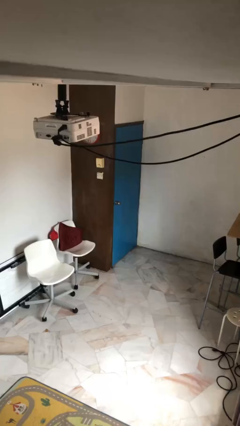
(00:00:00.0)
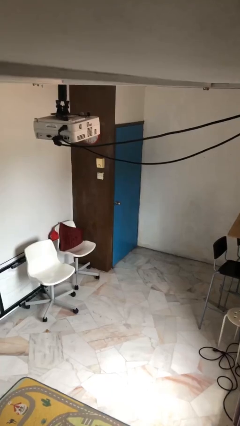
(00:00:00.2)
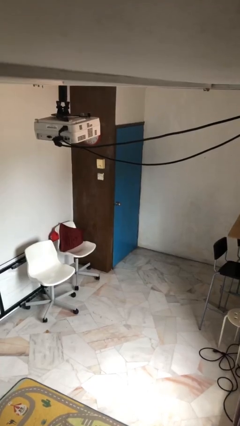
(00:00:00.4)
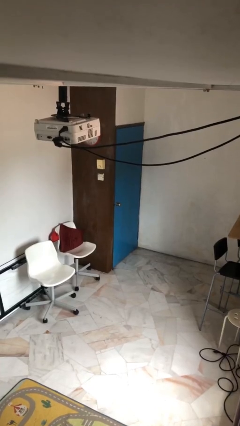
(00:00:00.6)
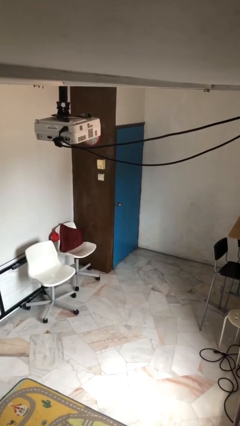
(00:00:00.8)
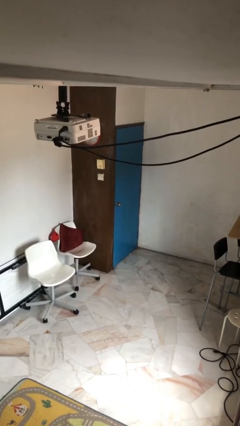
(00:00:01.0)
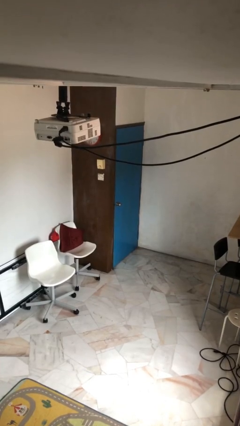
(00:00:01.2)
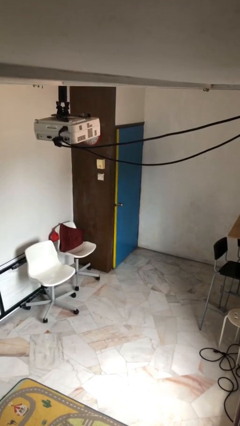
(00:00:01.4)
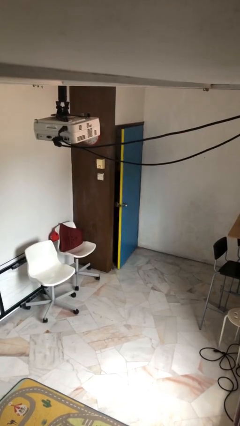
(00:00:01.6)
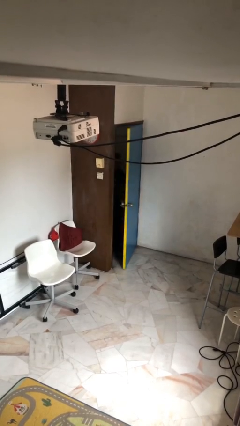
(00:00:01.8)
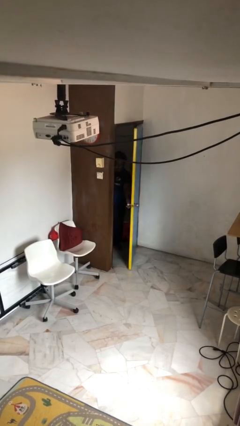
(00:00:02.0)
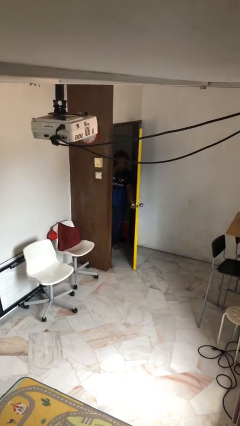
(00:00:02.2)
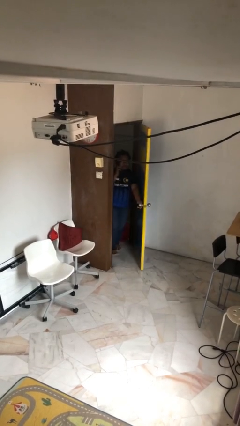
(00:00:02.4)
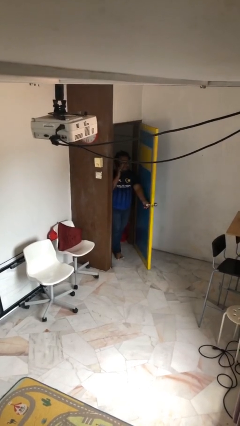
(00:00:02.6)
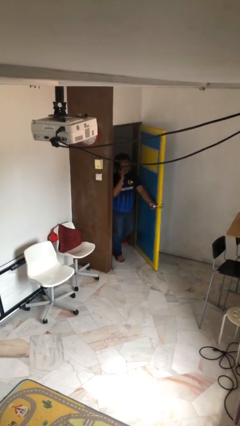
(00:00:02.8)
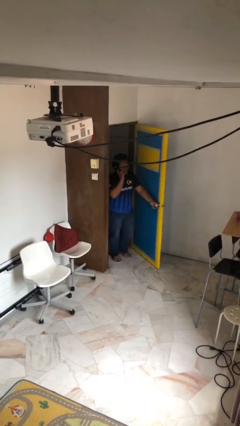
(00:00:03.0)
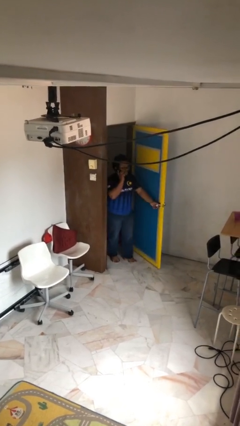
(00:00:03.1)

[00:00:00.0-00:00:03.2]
person opens facility door

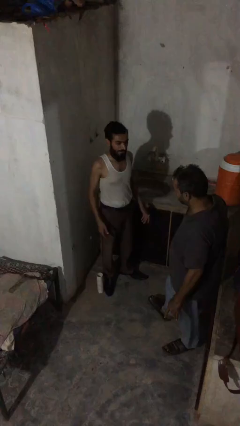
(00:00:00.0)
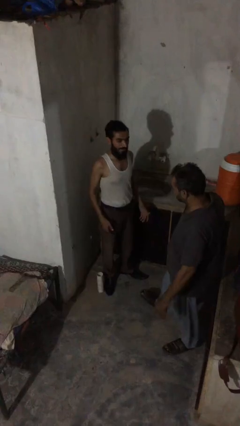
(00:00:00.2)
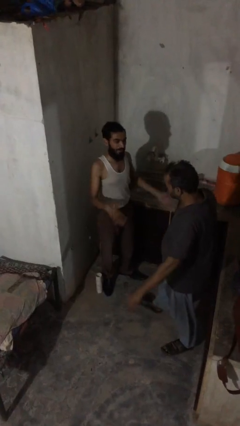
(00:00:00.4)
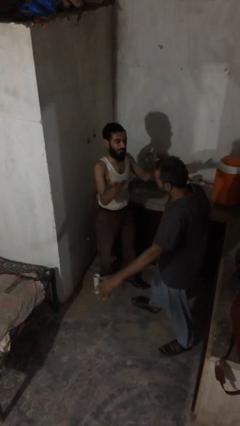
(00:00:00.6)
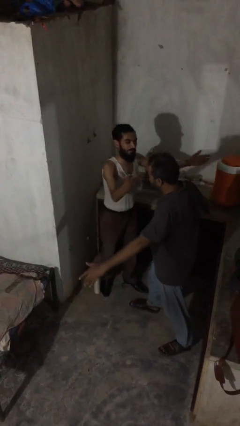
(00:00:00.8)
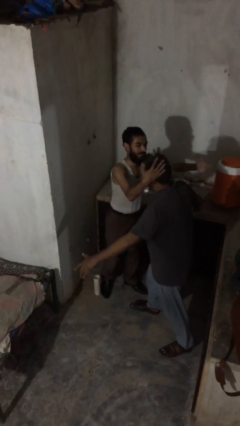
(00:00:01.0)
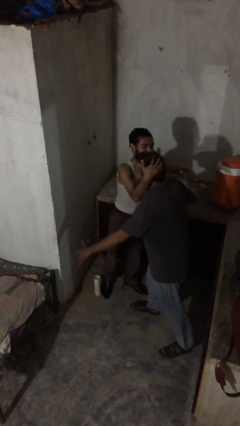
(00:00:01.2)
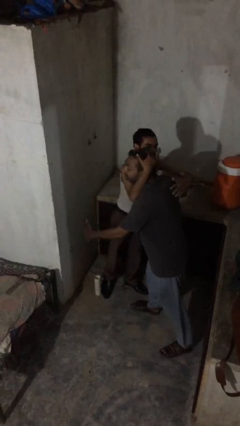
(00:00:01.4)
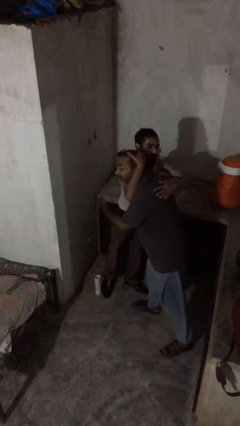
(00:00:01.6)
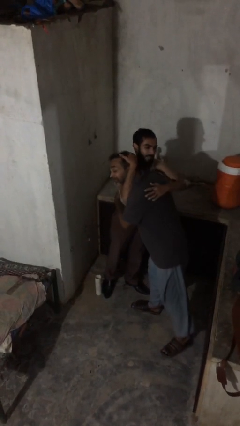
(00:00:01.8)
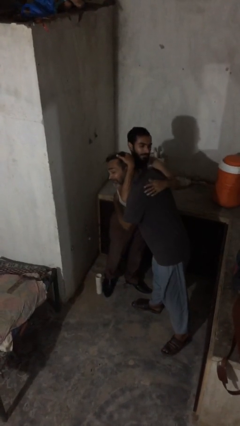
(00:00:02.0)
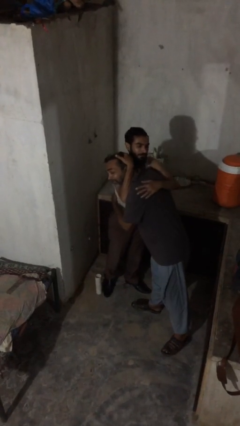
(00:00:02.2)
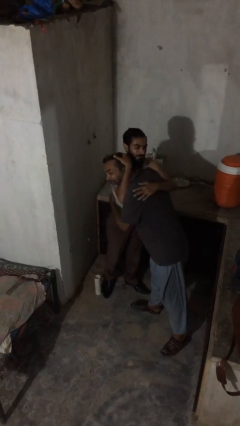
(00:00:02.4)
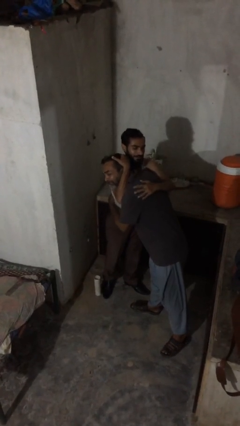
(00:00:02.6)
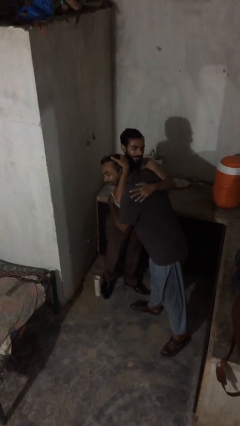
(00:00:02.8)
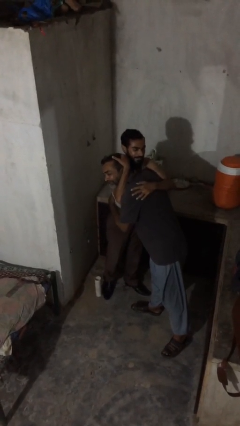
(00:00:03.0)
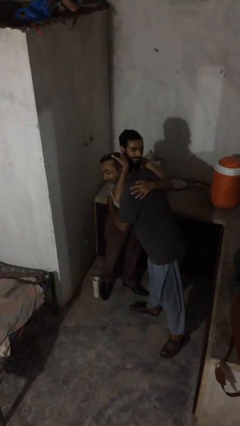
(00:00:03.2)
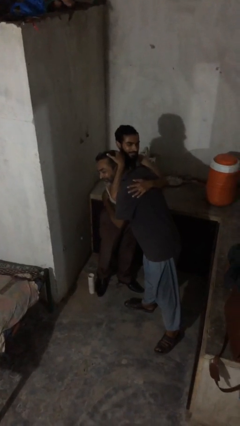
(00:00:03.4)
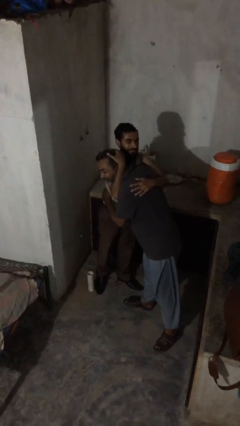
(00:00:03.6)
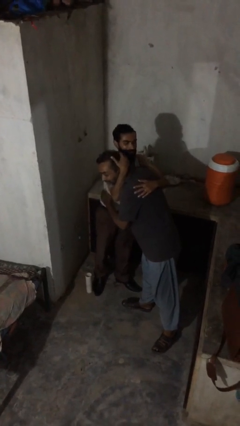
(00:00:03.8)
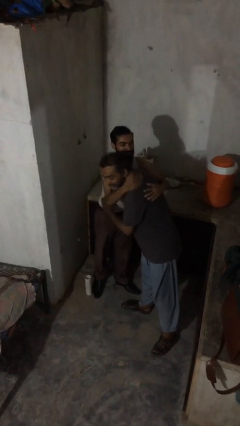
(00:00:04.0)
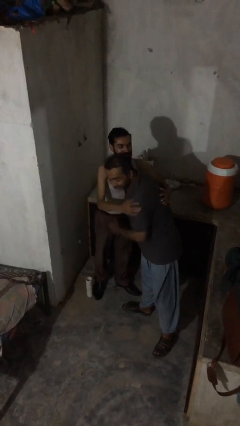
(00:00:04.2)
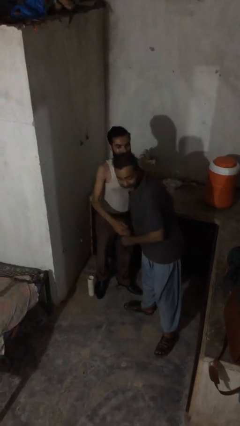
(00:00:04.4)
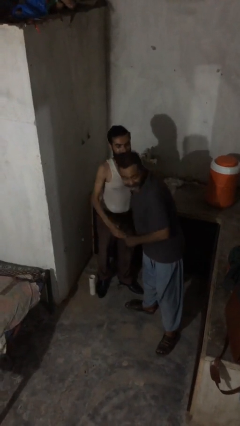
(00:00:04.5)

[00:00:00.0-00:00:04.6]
person embraces person

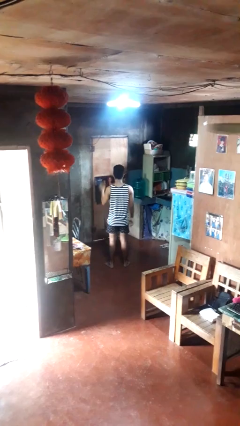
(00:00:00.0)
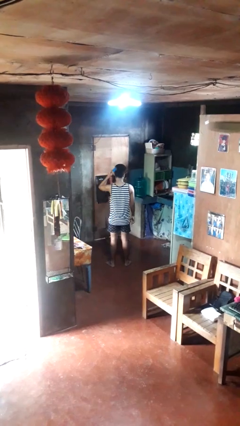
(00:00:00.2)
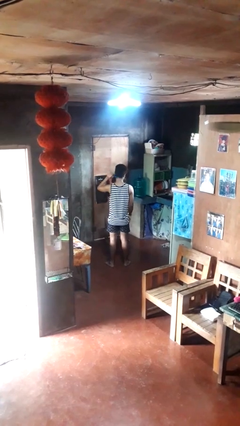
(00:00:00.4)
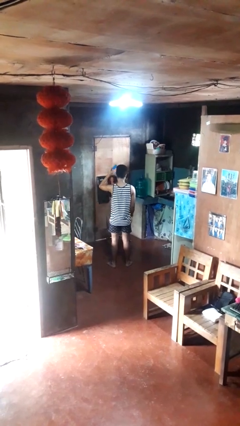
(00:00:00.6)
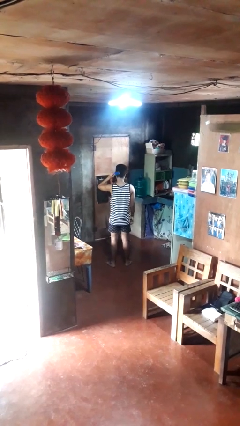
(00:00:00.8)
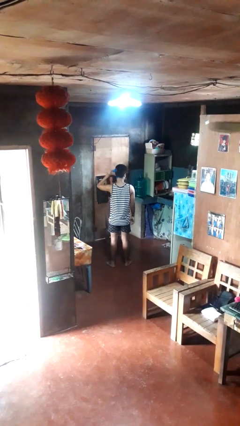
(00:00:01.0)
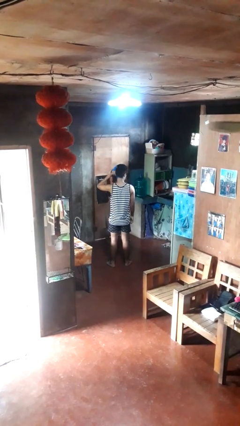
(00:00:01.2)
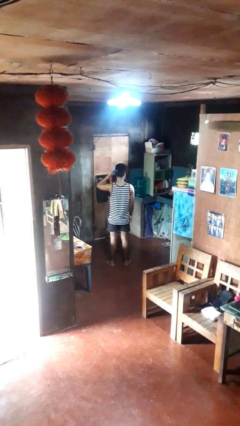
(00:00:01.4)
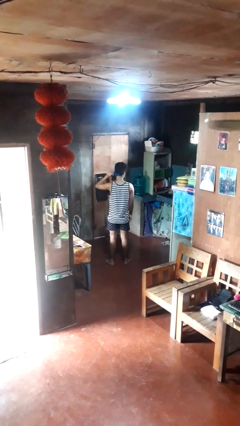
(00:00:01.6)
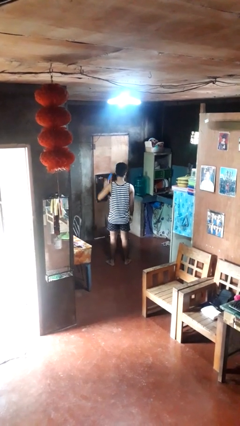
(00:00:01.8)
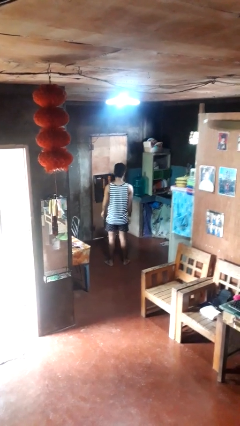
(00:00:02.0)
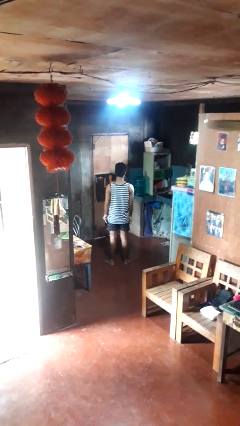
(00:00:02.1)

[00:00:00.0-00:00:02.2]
person brushes hair

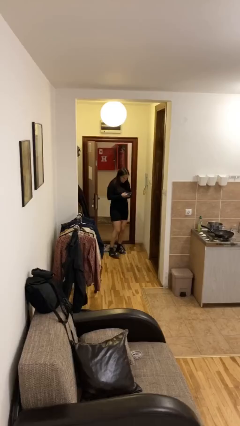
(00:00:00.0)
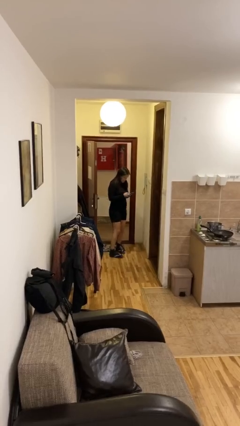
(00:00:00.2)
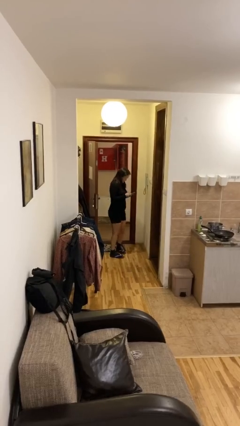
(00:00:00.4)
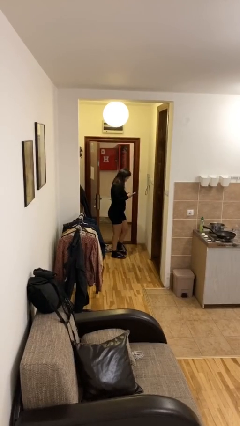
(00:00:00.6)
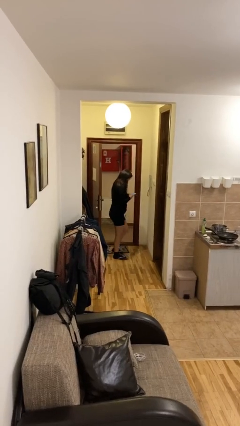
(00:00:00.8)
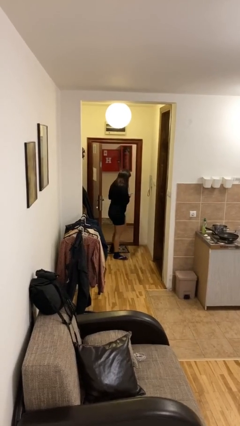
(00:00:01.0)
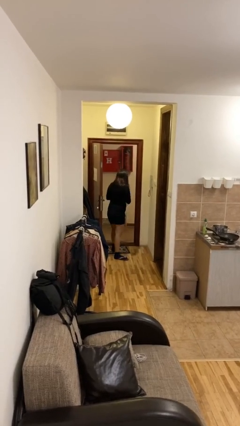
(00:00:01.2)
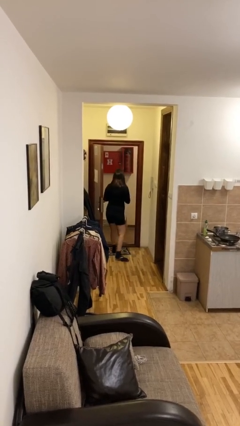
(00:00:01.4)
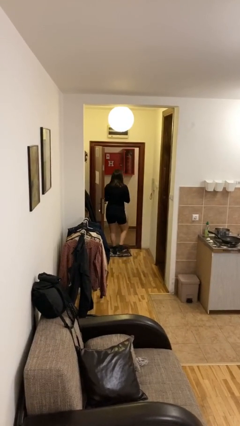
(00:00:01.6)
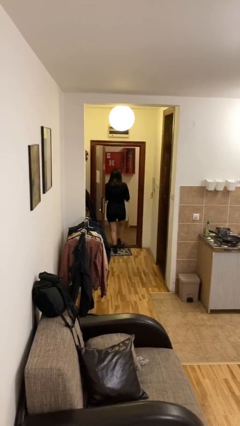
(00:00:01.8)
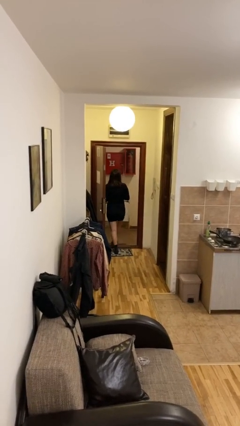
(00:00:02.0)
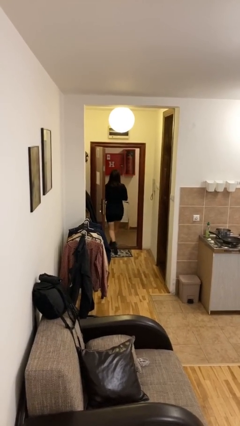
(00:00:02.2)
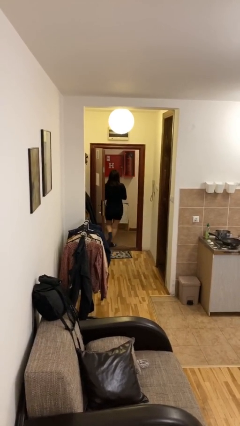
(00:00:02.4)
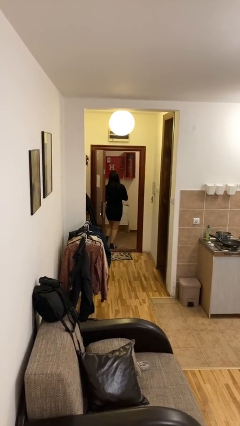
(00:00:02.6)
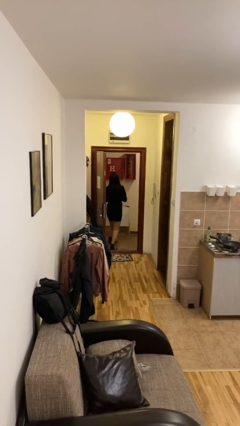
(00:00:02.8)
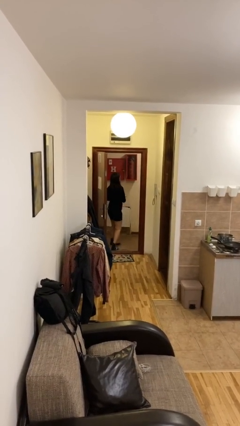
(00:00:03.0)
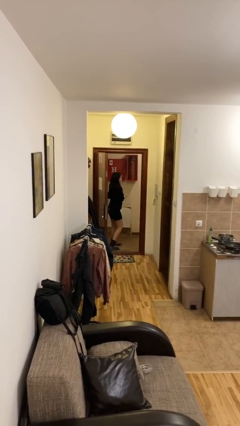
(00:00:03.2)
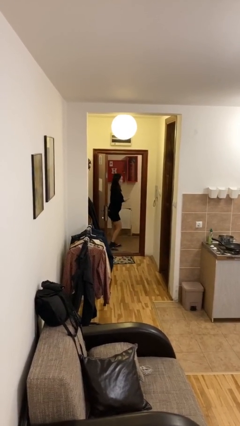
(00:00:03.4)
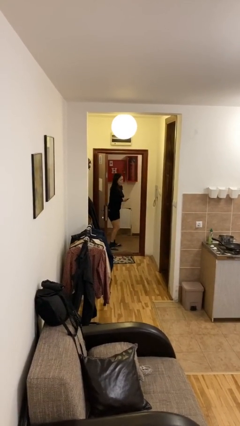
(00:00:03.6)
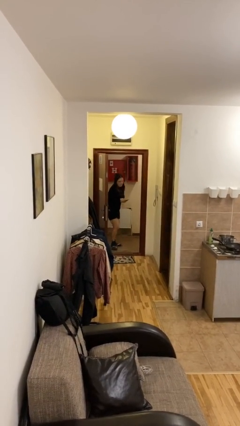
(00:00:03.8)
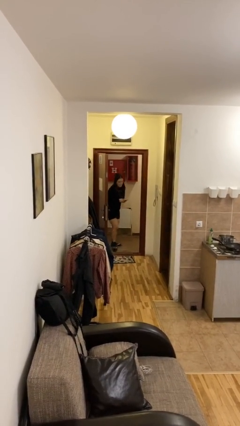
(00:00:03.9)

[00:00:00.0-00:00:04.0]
person exits scene through structure

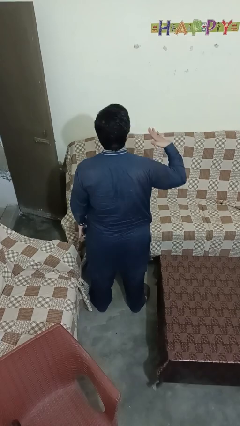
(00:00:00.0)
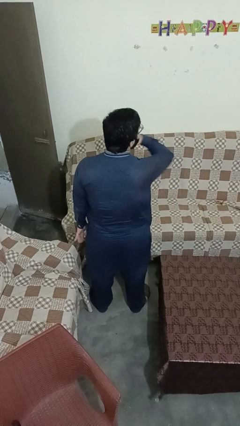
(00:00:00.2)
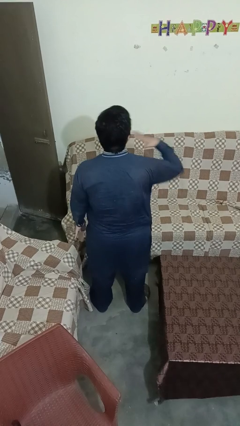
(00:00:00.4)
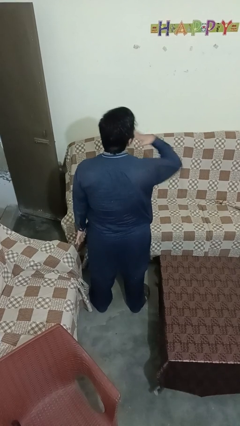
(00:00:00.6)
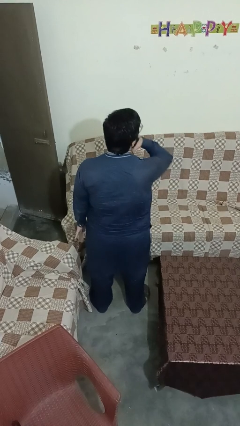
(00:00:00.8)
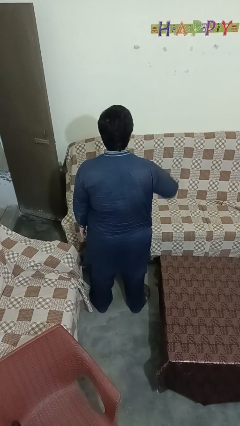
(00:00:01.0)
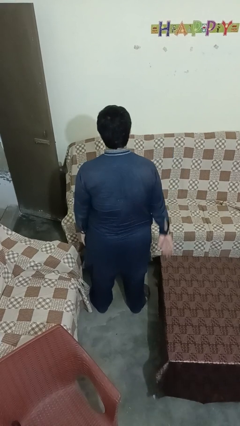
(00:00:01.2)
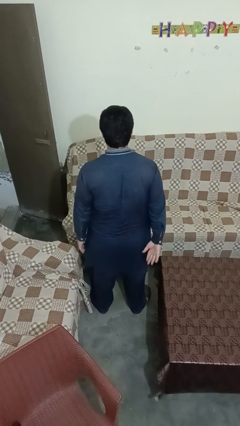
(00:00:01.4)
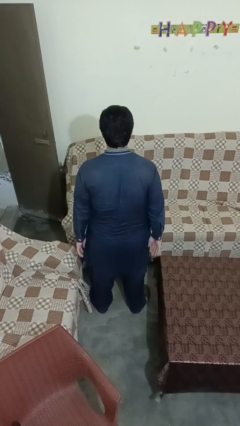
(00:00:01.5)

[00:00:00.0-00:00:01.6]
person gestures cut

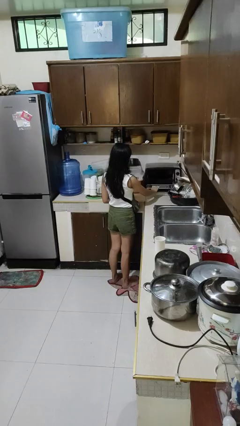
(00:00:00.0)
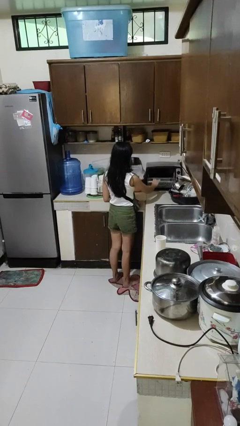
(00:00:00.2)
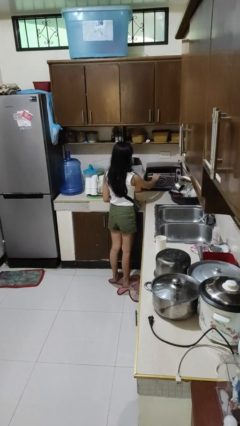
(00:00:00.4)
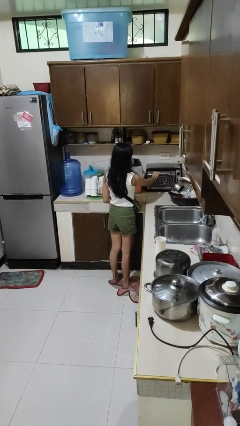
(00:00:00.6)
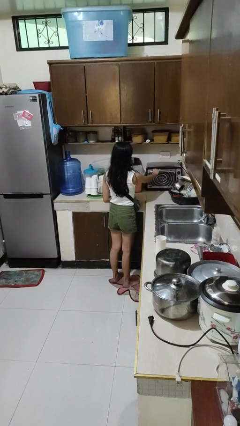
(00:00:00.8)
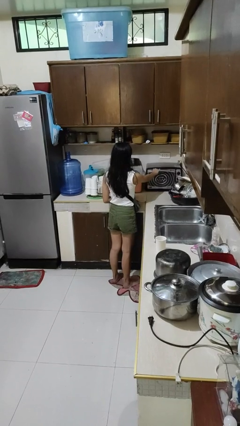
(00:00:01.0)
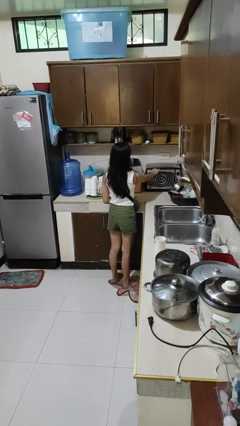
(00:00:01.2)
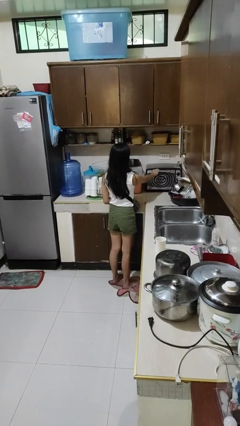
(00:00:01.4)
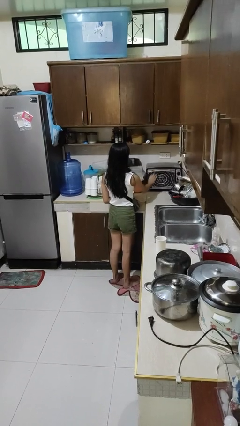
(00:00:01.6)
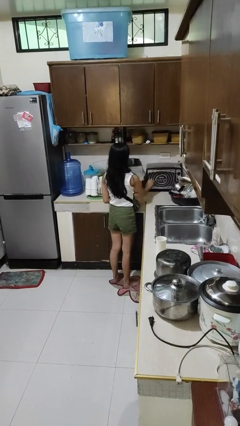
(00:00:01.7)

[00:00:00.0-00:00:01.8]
person closes microwave
